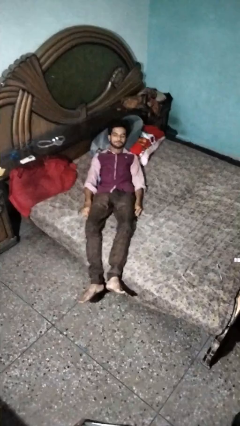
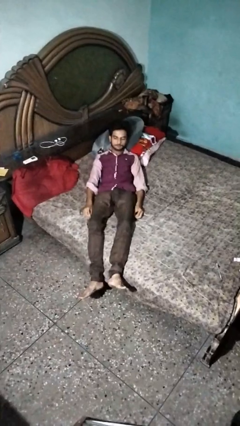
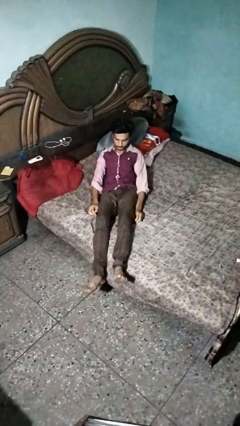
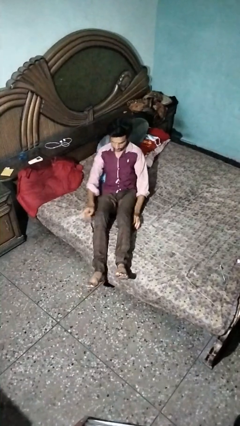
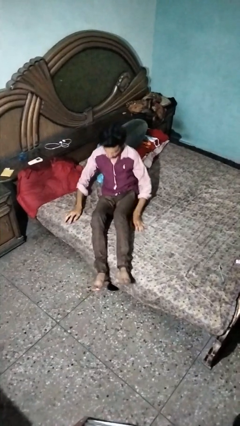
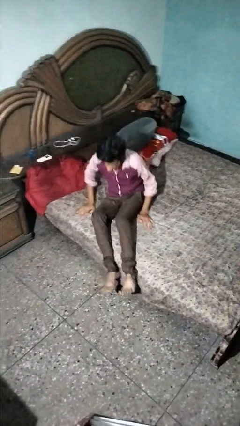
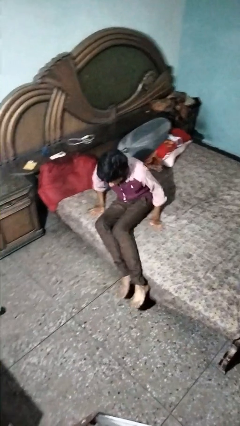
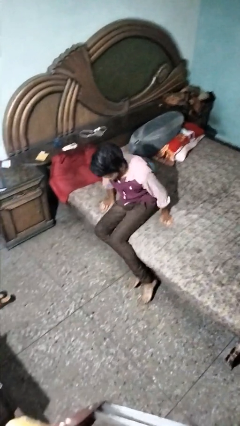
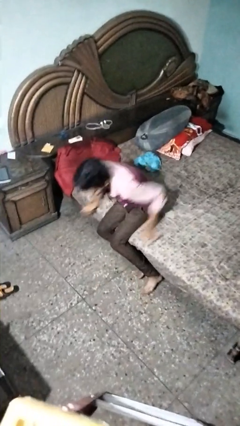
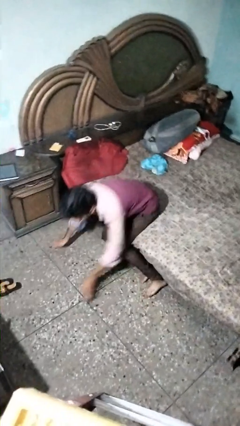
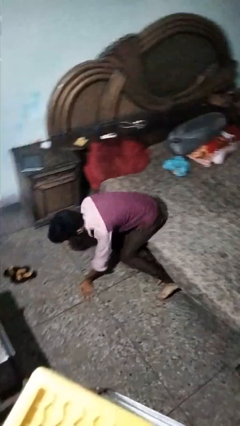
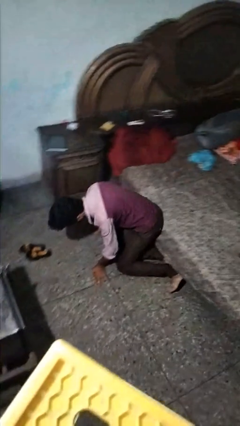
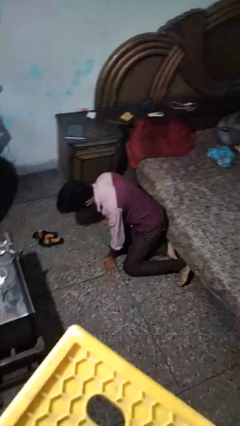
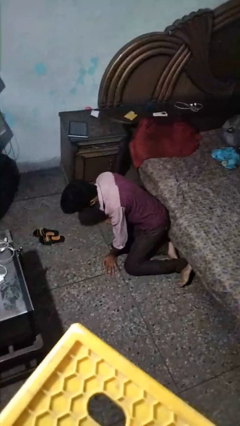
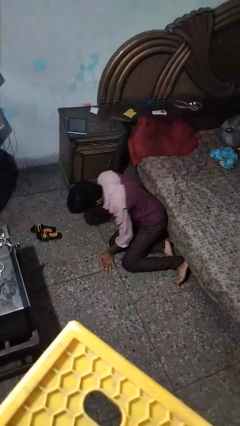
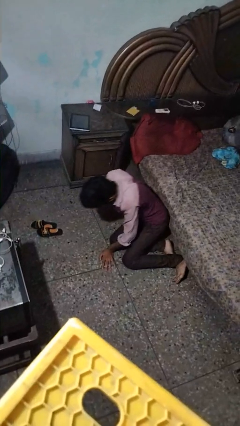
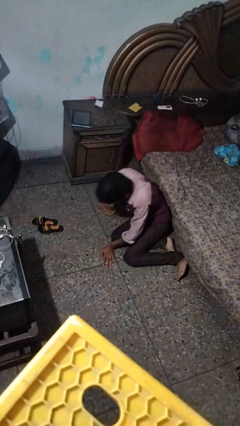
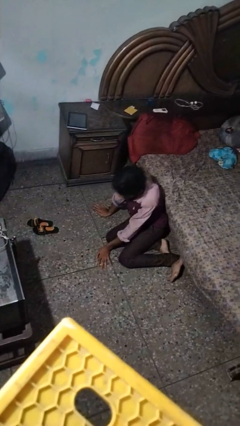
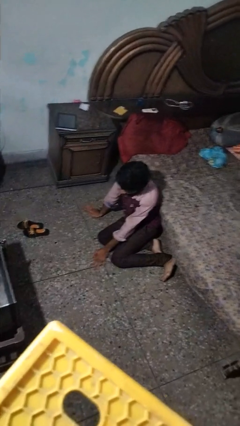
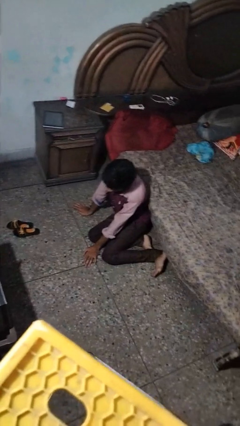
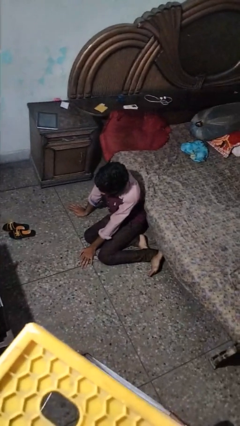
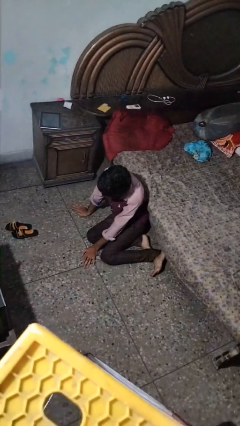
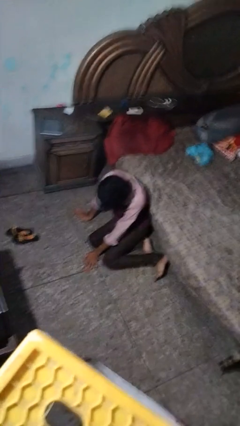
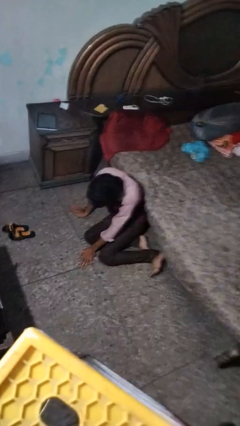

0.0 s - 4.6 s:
person falls from bed

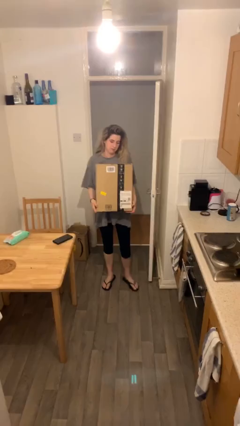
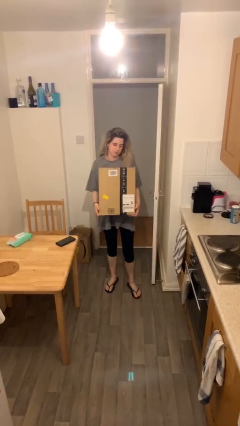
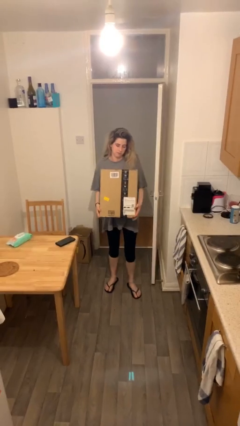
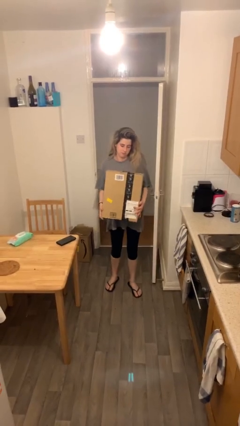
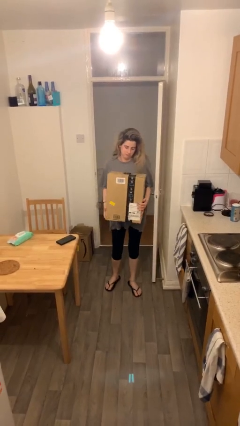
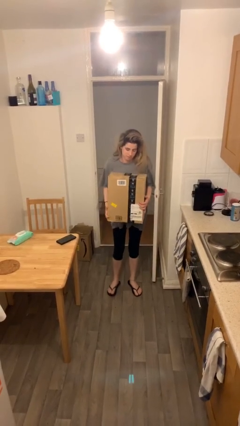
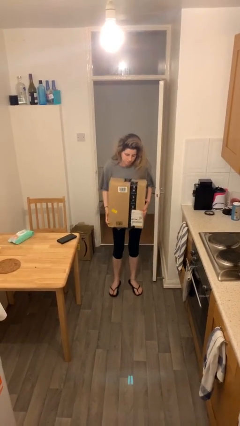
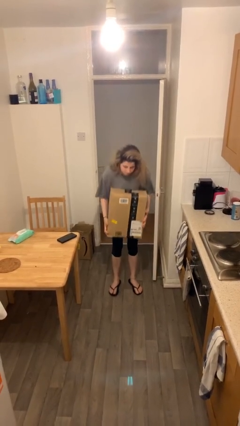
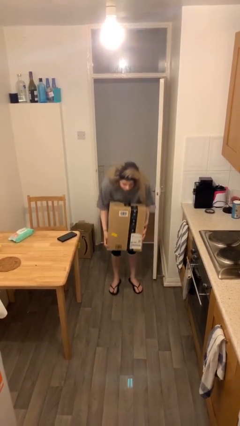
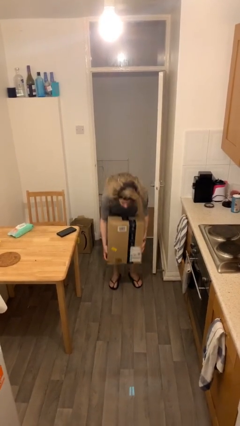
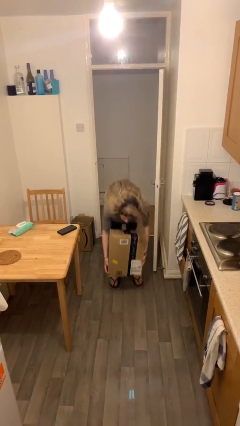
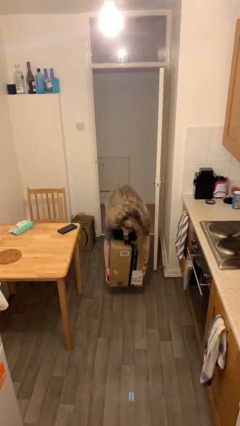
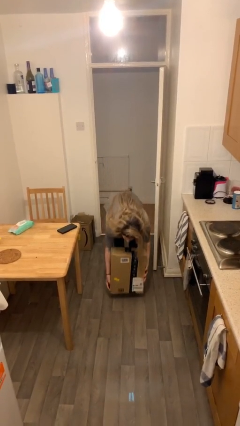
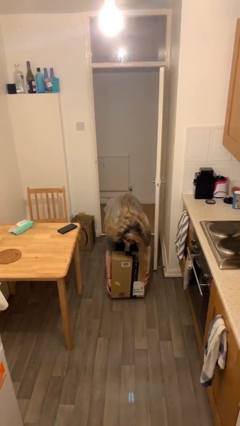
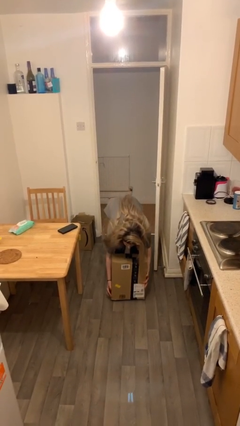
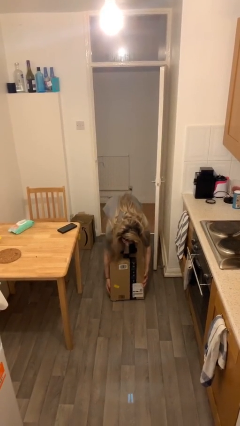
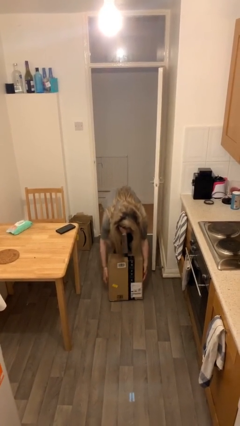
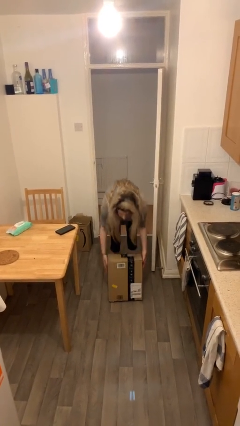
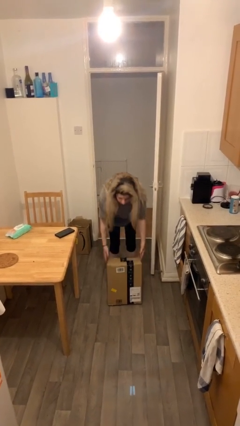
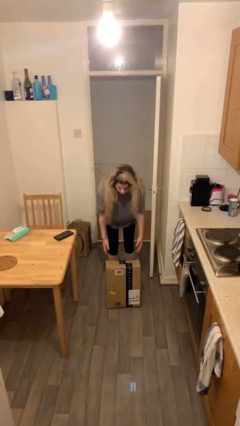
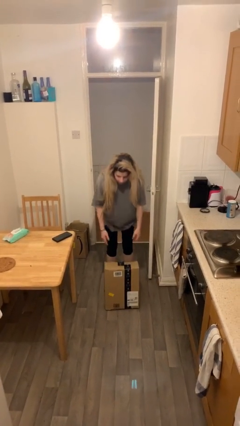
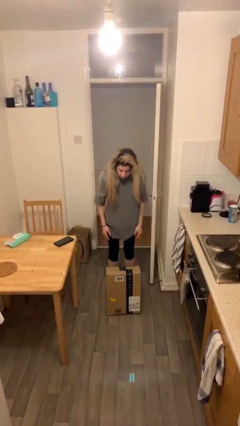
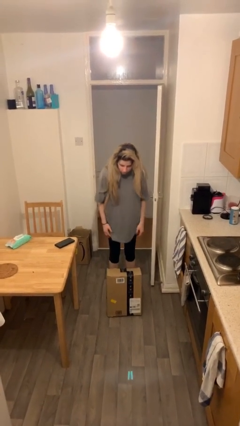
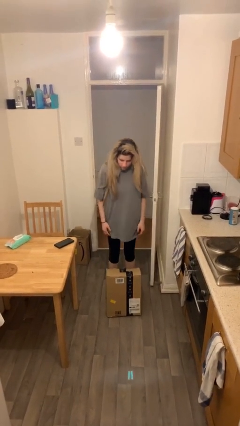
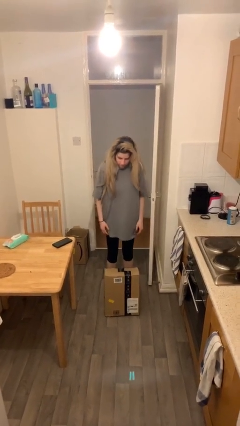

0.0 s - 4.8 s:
person puts down object on floor

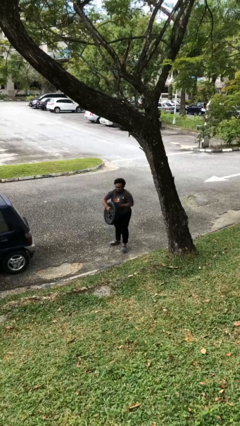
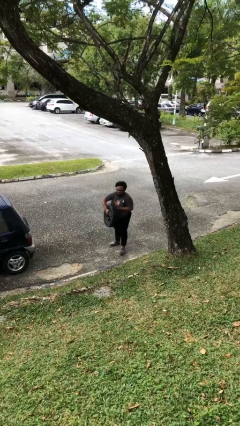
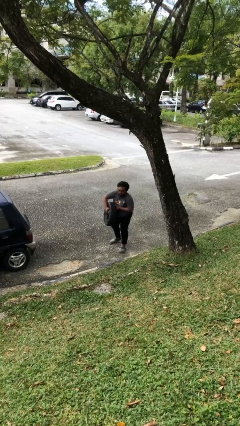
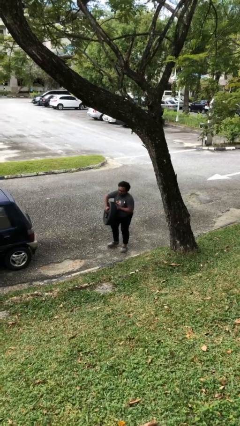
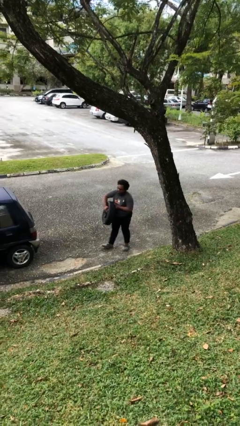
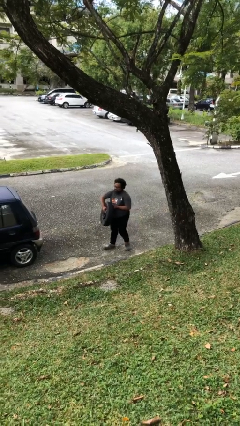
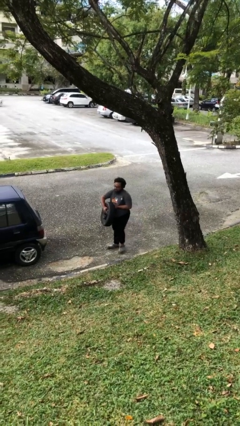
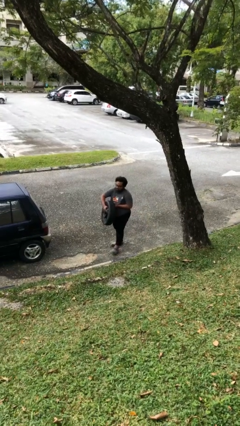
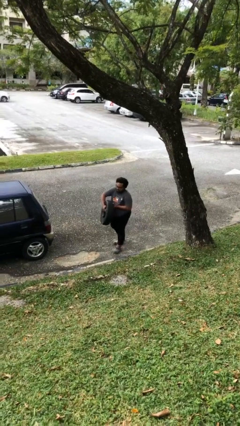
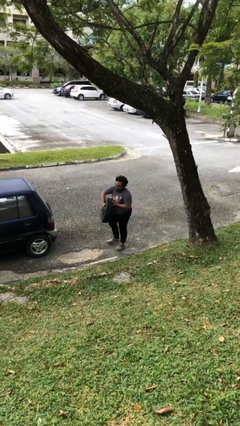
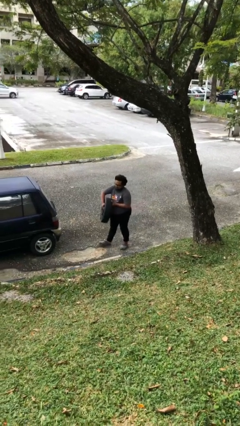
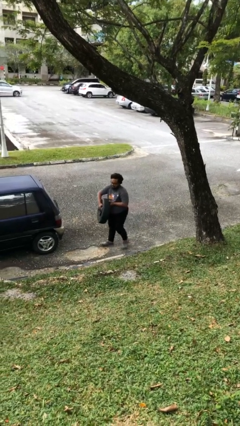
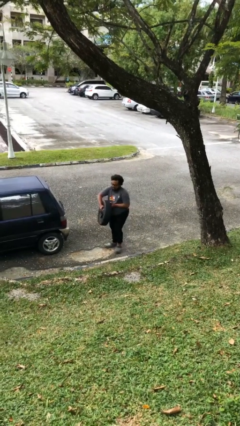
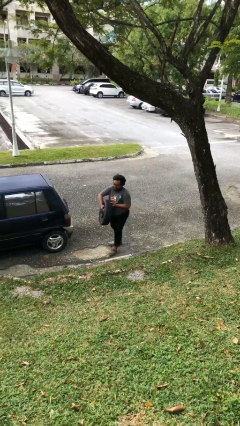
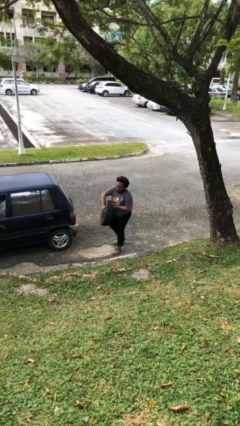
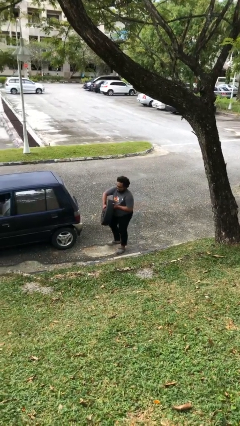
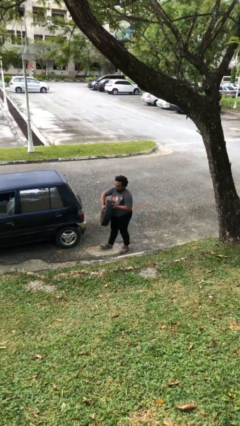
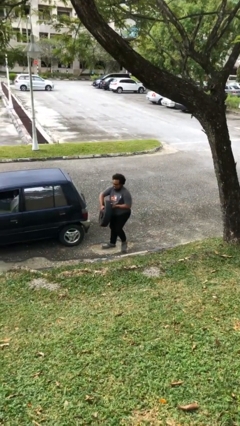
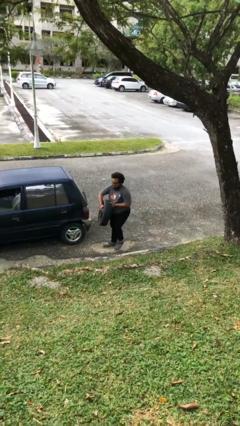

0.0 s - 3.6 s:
person carries heavy object

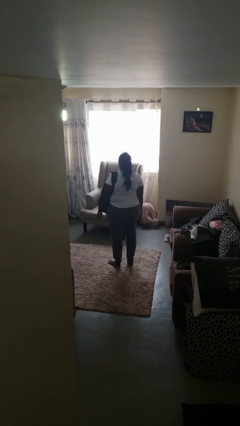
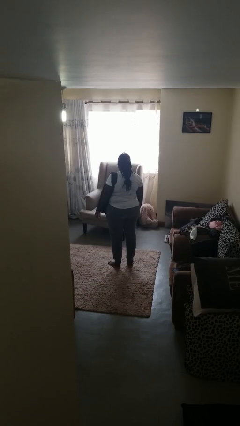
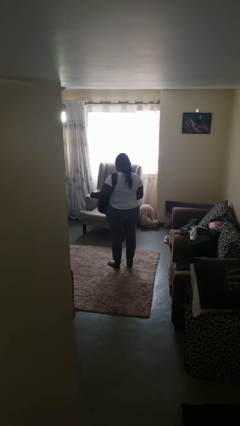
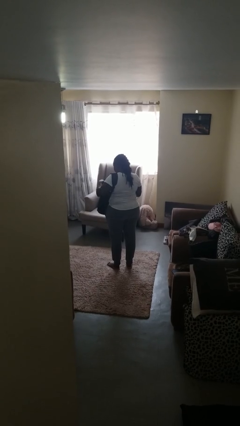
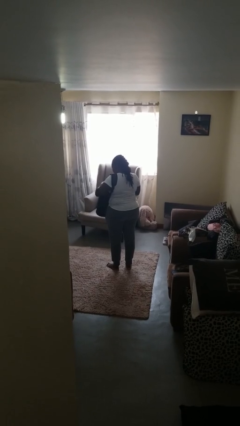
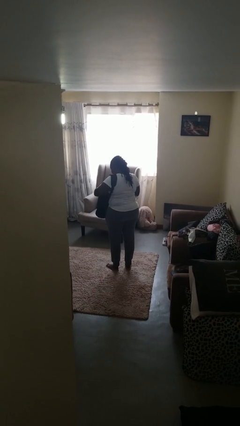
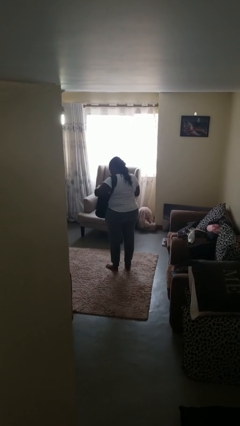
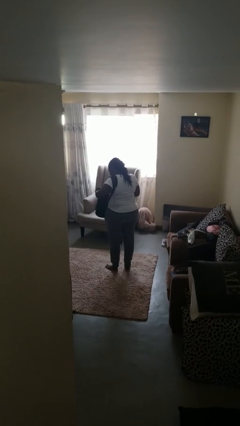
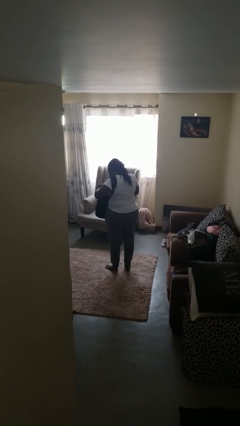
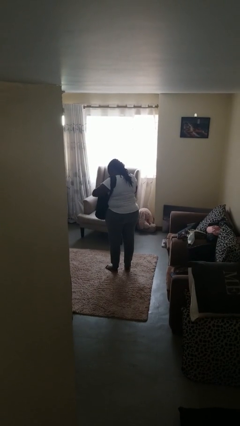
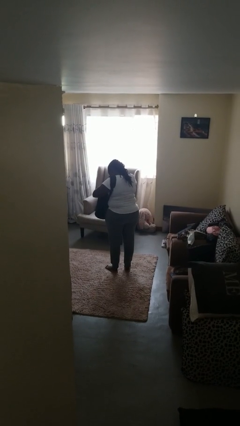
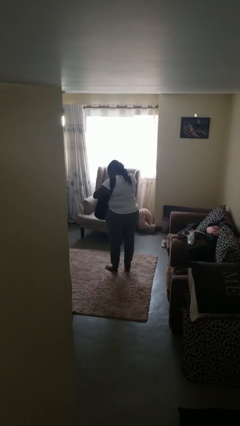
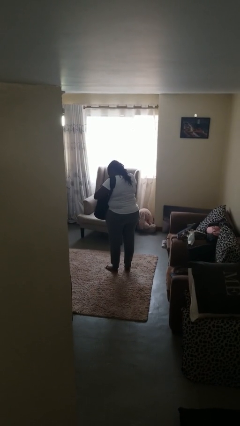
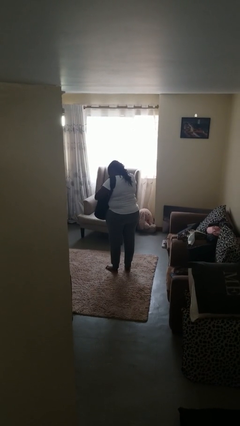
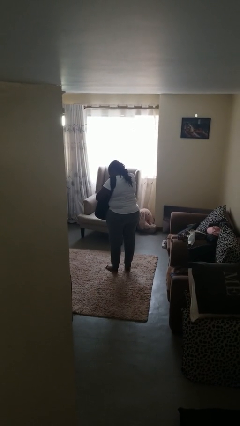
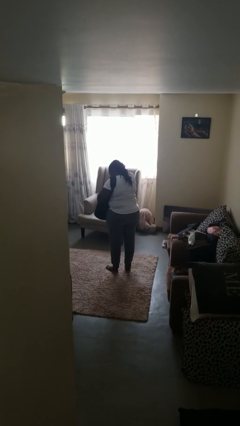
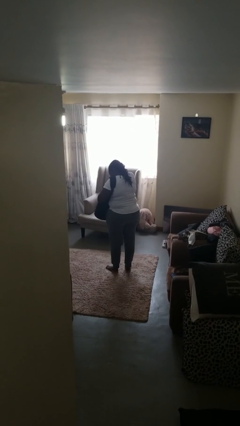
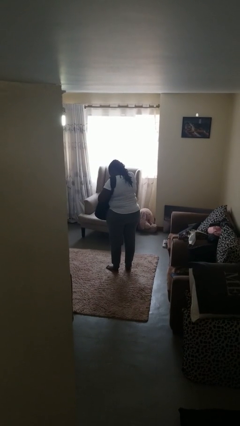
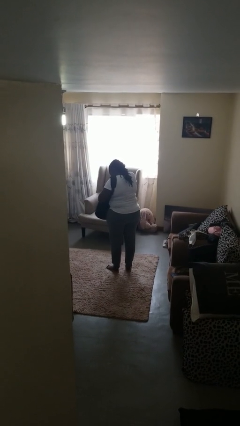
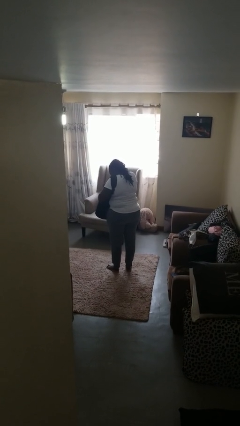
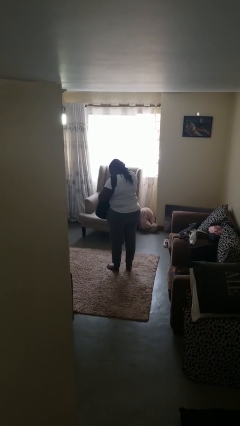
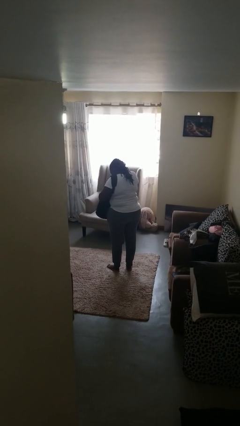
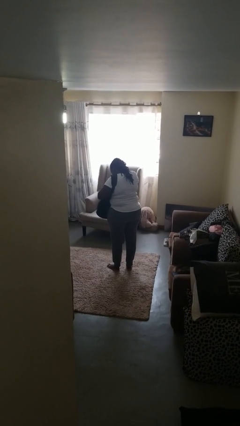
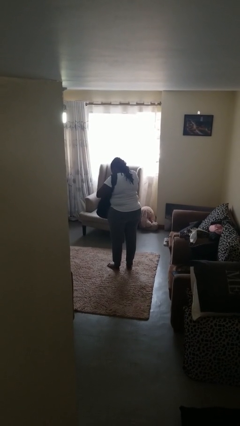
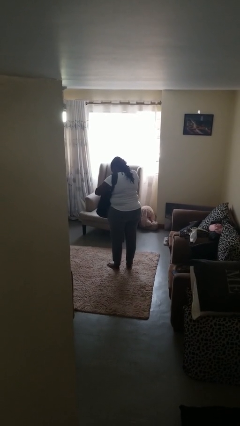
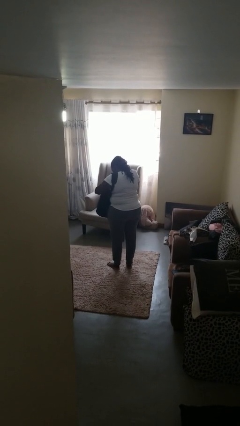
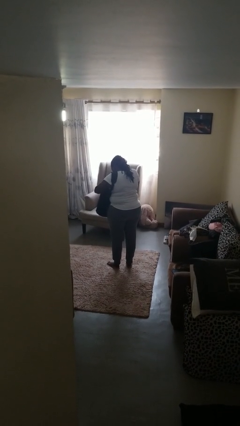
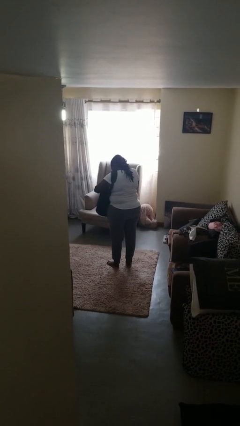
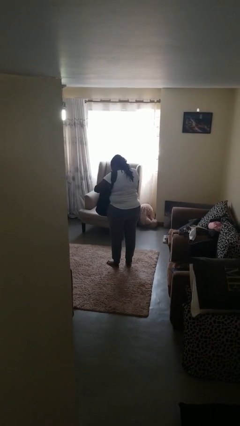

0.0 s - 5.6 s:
person searches in backpack
